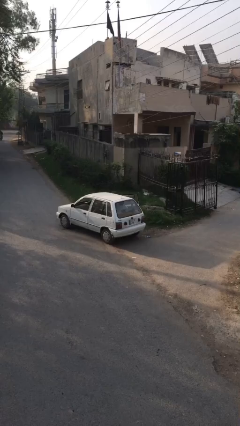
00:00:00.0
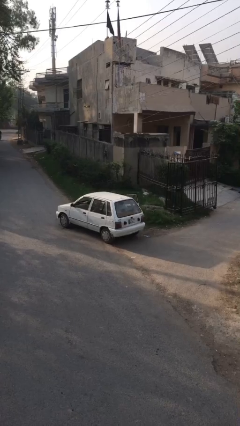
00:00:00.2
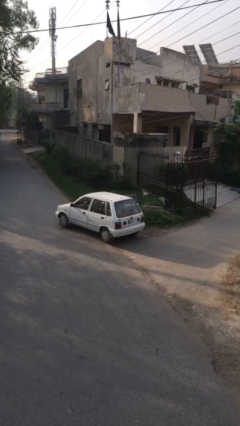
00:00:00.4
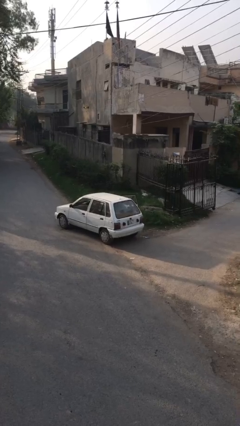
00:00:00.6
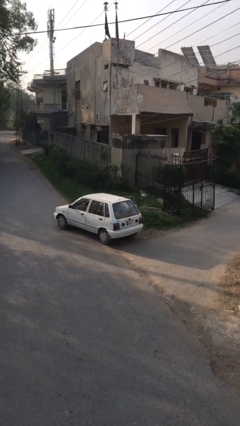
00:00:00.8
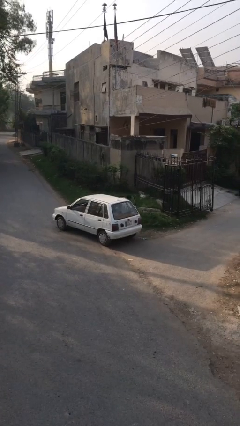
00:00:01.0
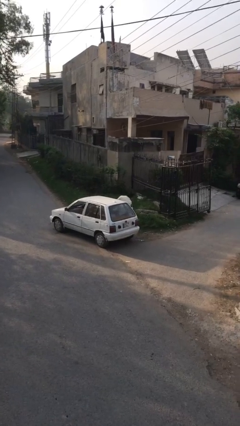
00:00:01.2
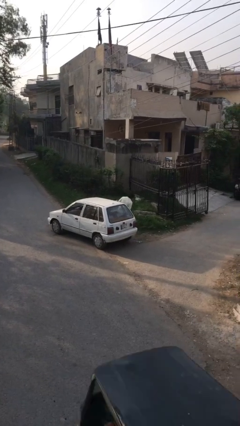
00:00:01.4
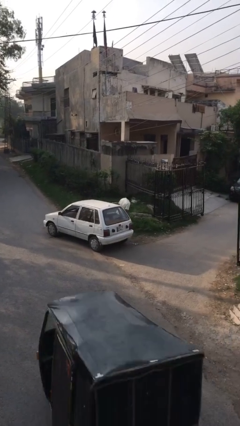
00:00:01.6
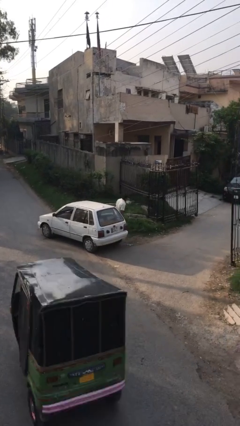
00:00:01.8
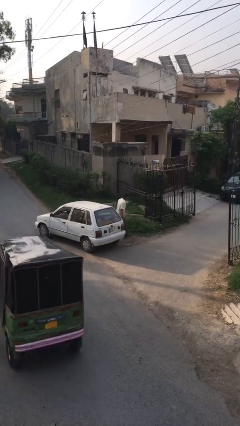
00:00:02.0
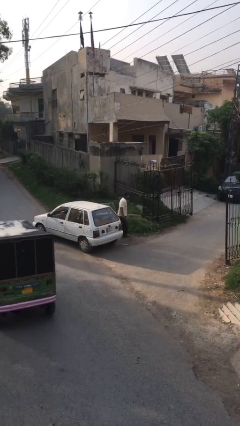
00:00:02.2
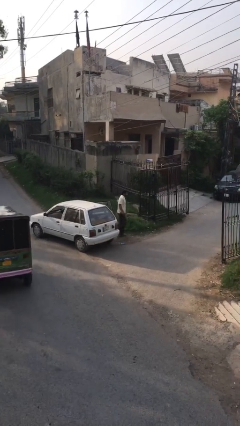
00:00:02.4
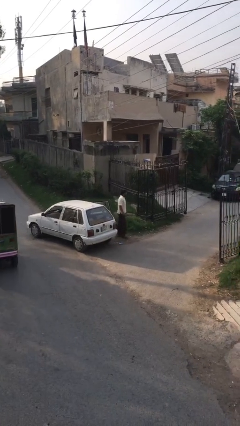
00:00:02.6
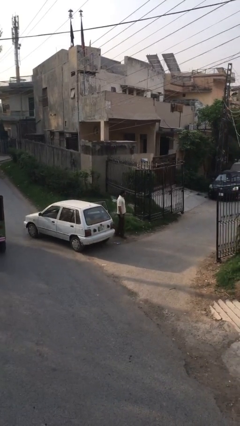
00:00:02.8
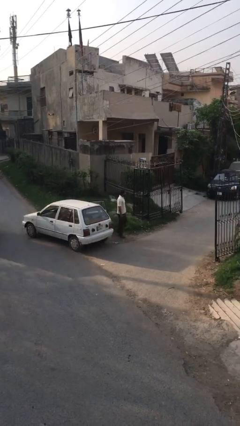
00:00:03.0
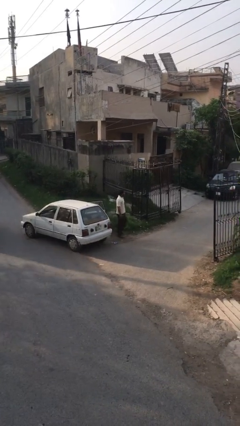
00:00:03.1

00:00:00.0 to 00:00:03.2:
person exits car

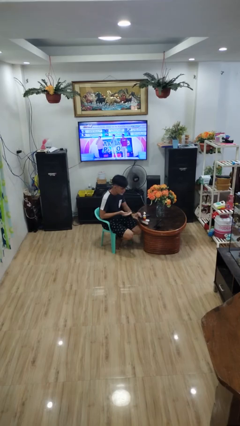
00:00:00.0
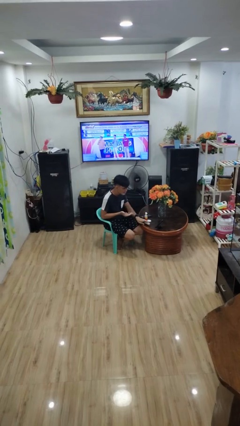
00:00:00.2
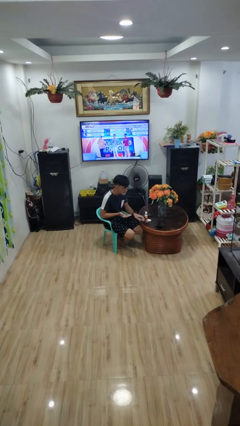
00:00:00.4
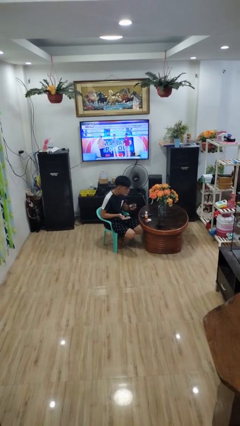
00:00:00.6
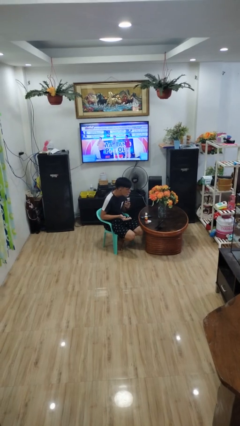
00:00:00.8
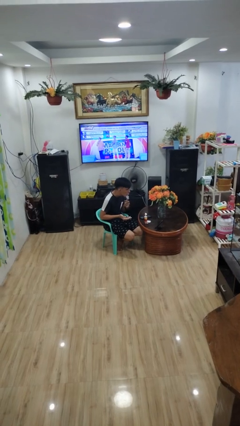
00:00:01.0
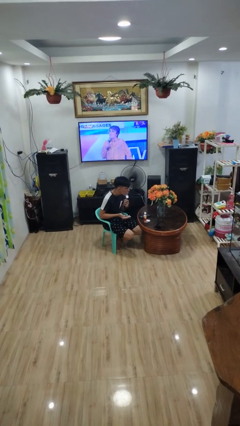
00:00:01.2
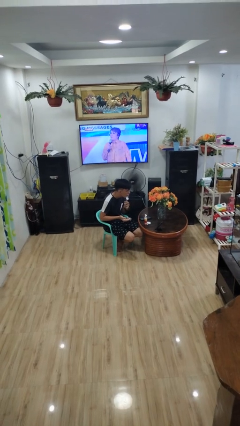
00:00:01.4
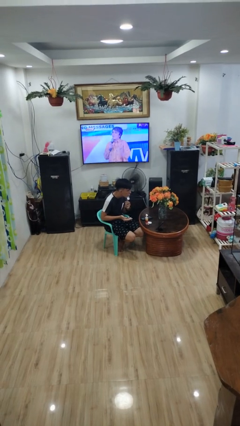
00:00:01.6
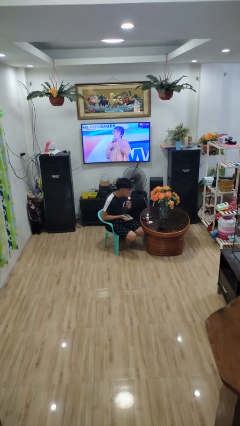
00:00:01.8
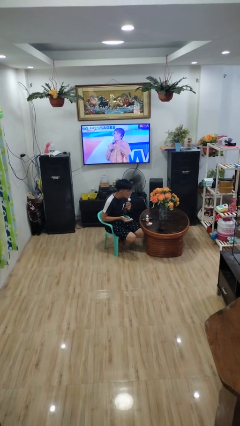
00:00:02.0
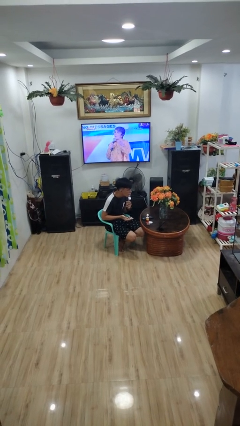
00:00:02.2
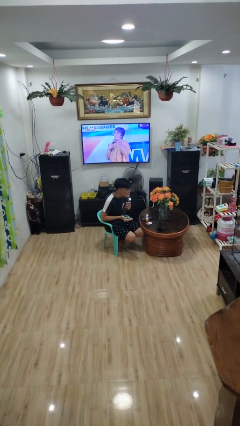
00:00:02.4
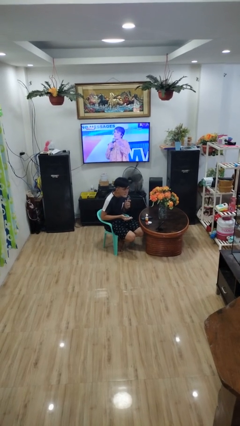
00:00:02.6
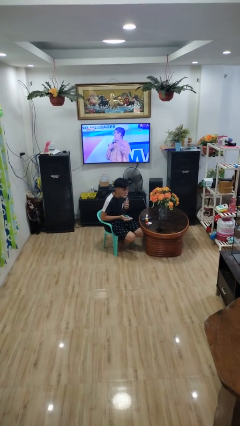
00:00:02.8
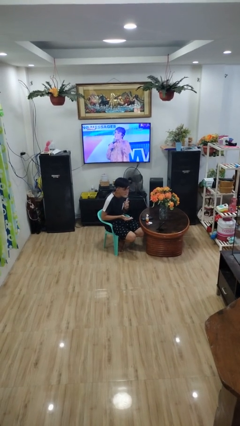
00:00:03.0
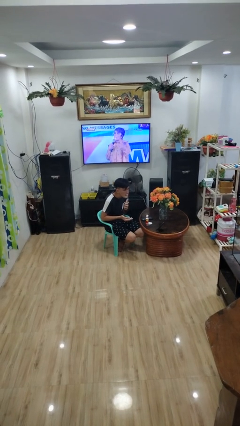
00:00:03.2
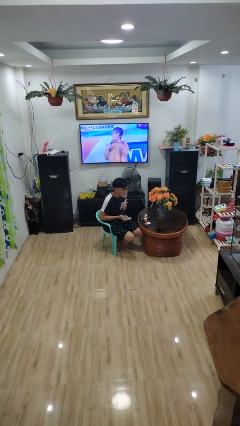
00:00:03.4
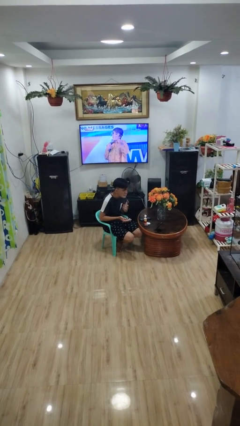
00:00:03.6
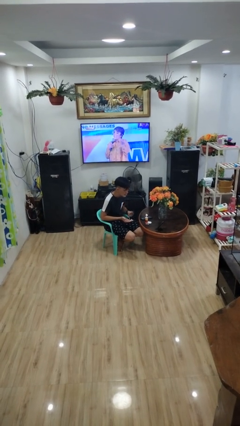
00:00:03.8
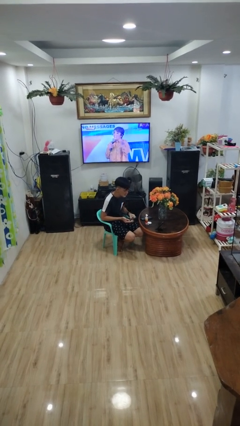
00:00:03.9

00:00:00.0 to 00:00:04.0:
person shaves face

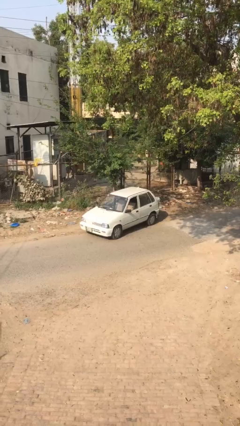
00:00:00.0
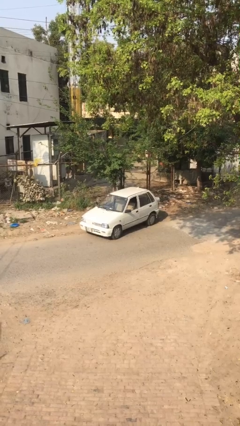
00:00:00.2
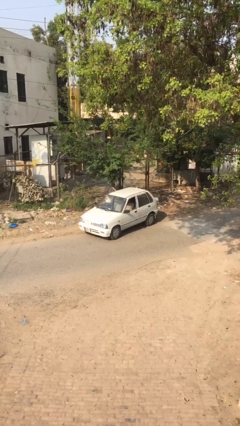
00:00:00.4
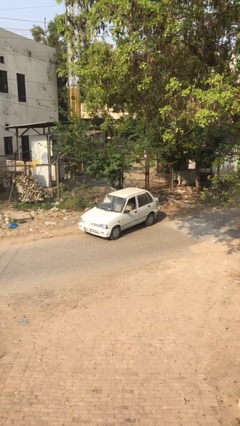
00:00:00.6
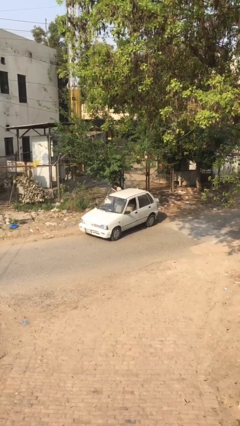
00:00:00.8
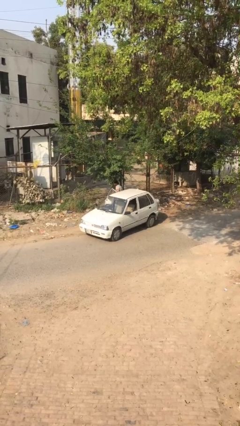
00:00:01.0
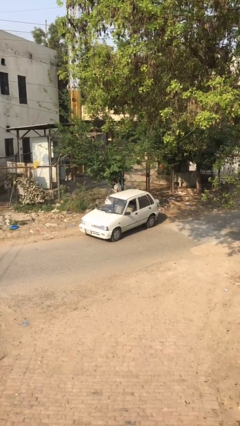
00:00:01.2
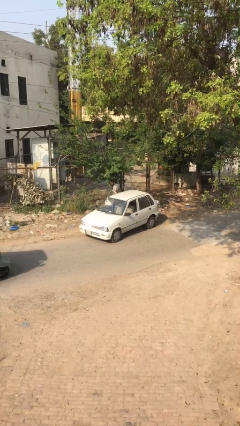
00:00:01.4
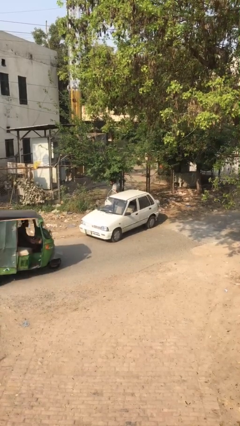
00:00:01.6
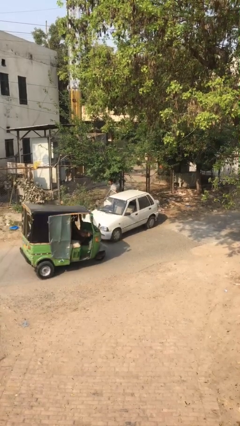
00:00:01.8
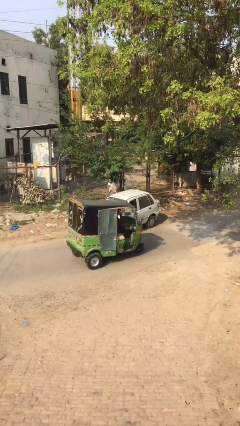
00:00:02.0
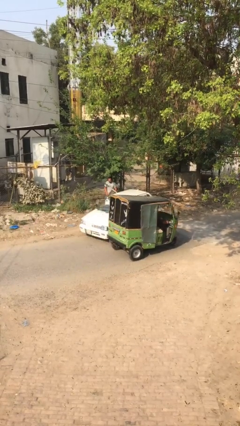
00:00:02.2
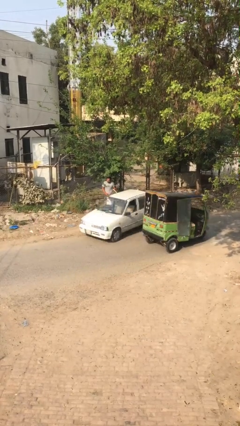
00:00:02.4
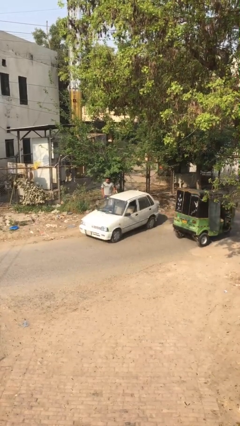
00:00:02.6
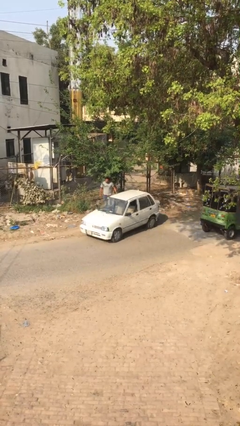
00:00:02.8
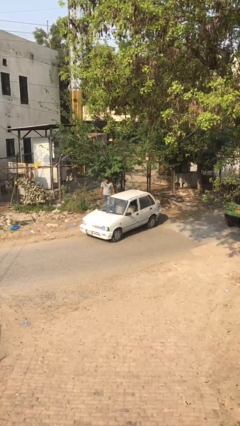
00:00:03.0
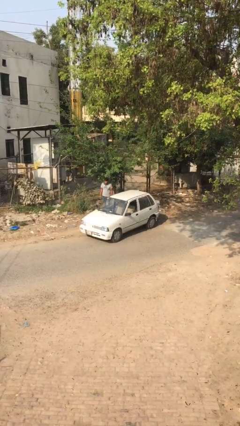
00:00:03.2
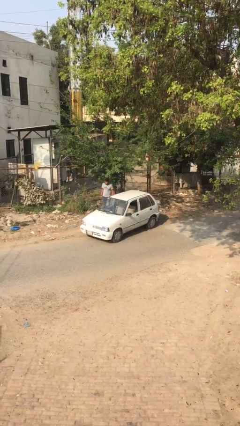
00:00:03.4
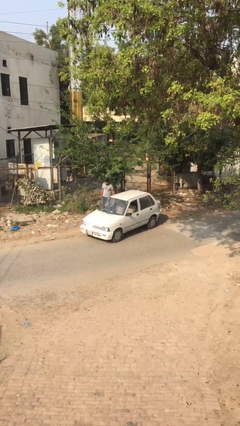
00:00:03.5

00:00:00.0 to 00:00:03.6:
car drops off person

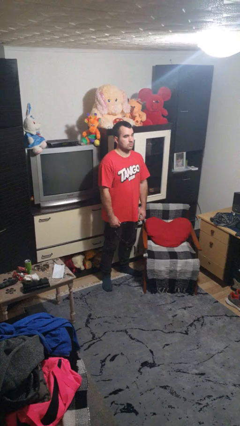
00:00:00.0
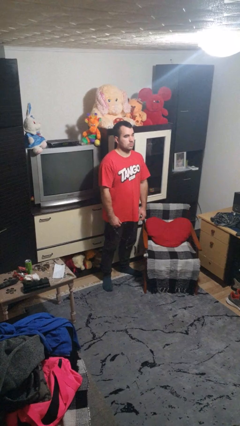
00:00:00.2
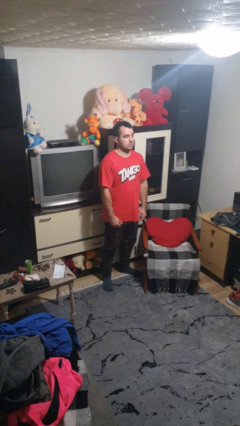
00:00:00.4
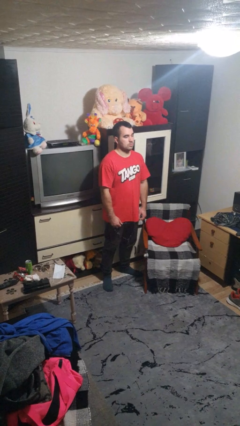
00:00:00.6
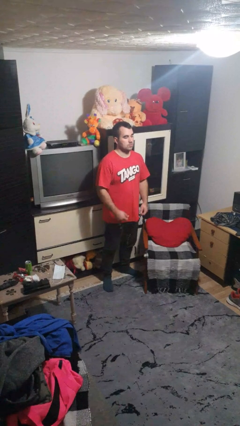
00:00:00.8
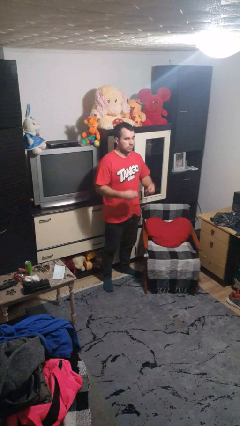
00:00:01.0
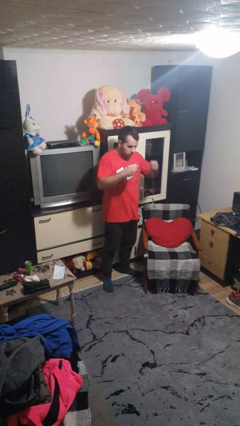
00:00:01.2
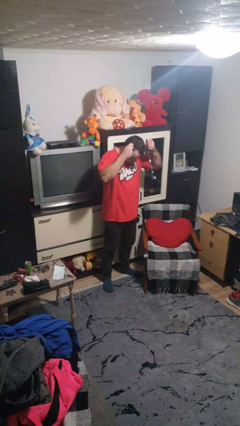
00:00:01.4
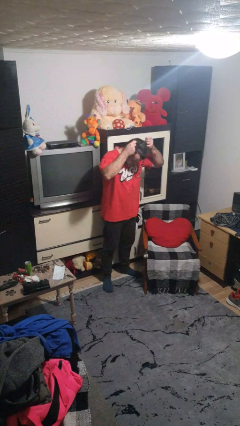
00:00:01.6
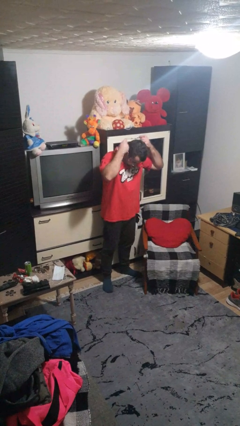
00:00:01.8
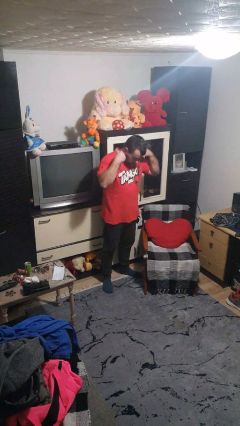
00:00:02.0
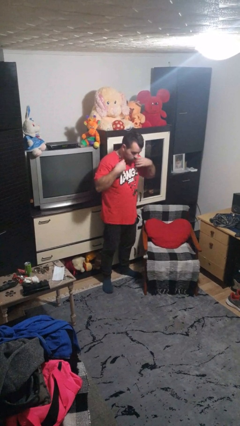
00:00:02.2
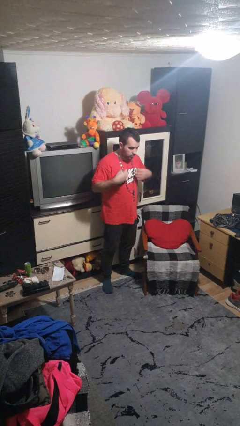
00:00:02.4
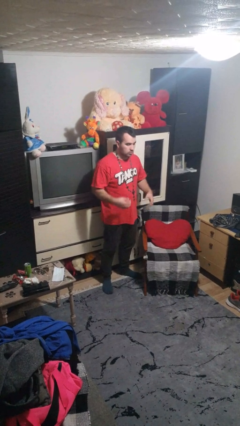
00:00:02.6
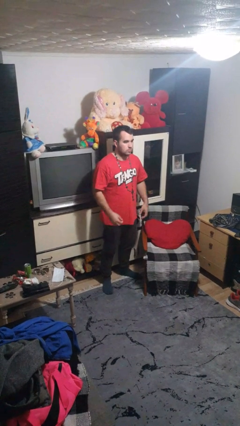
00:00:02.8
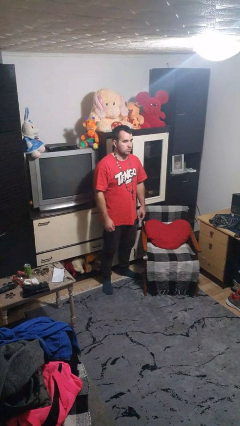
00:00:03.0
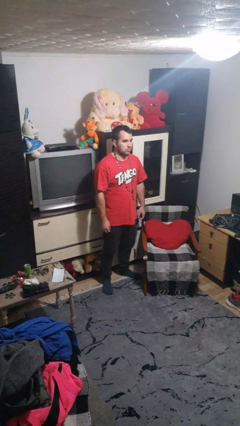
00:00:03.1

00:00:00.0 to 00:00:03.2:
person puts on necklace

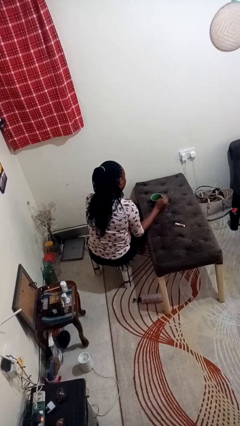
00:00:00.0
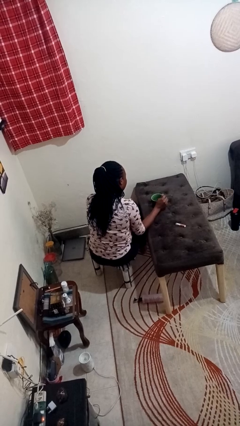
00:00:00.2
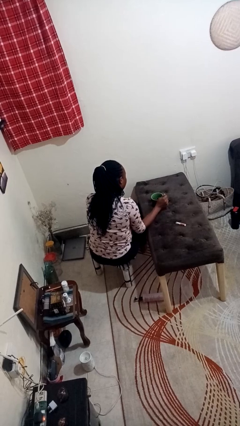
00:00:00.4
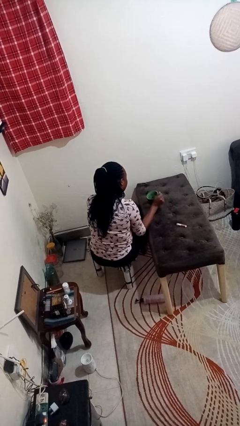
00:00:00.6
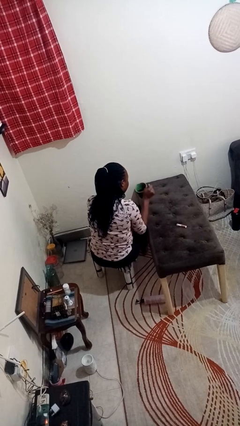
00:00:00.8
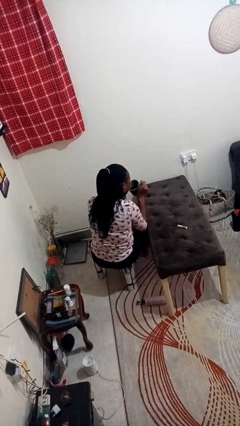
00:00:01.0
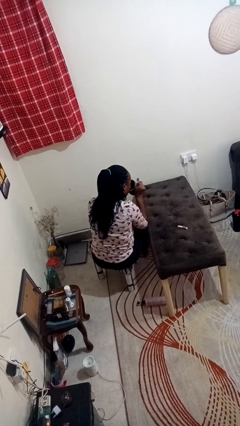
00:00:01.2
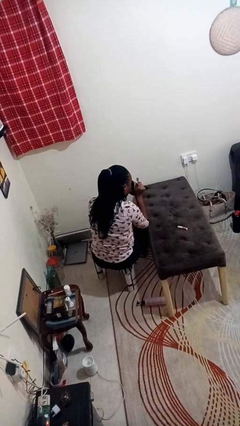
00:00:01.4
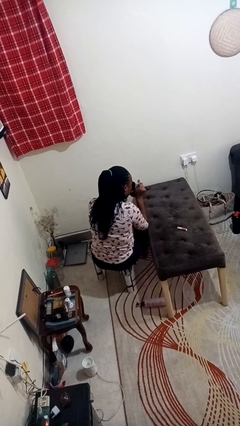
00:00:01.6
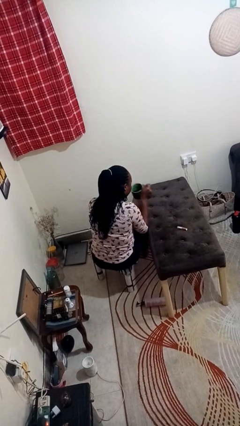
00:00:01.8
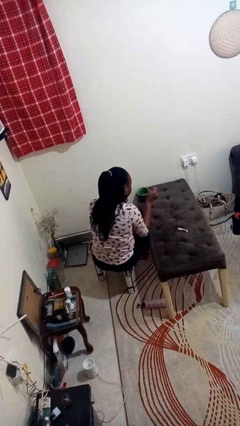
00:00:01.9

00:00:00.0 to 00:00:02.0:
person drinks from mug

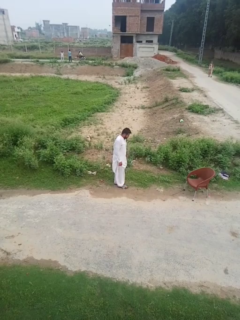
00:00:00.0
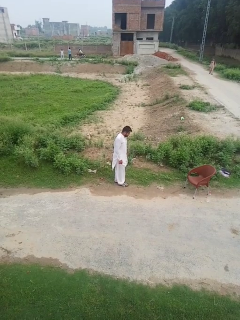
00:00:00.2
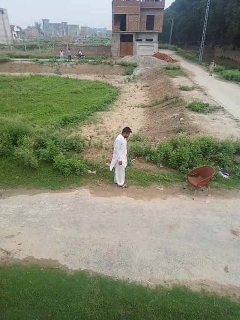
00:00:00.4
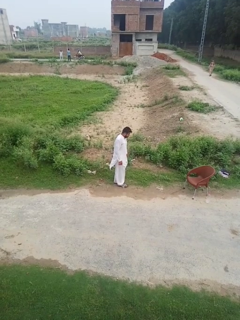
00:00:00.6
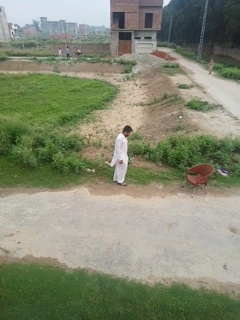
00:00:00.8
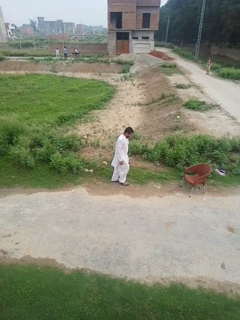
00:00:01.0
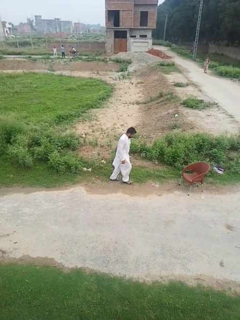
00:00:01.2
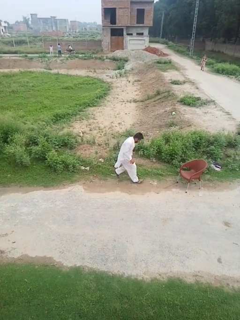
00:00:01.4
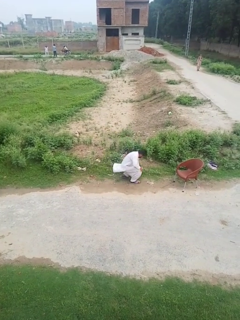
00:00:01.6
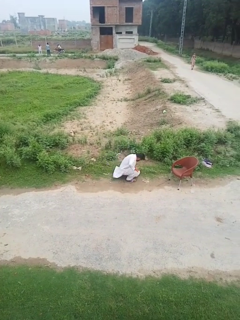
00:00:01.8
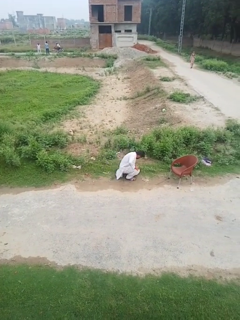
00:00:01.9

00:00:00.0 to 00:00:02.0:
person trips on object on floor
